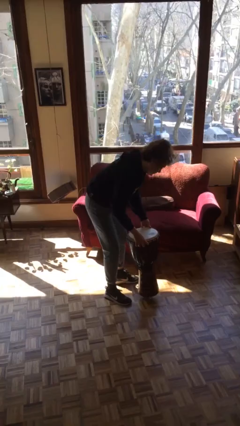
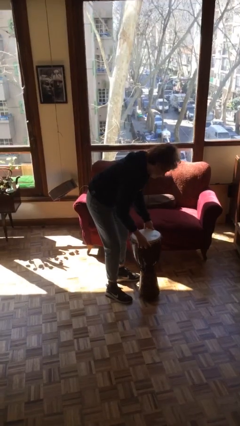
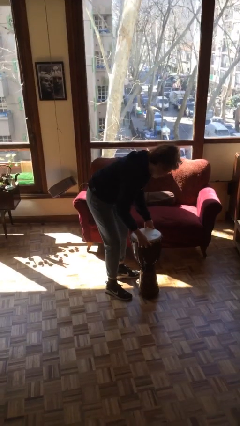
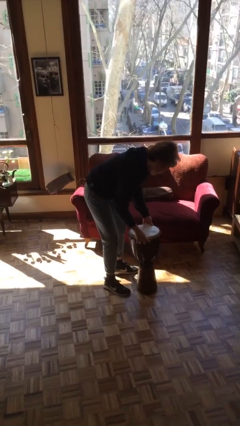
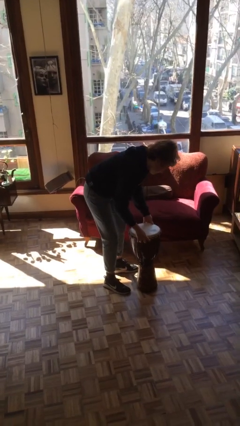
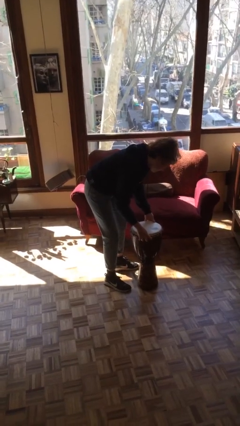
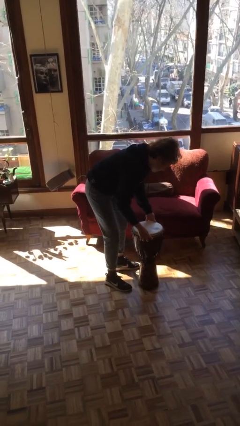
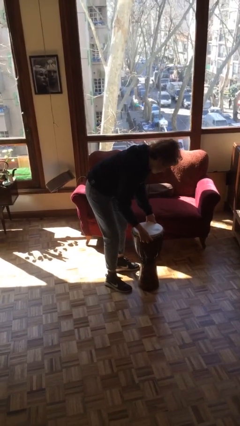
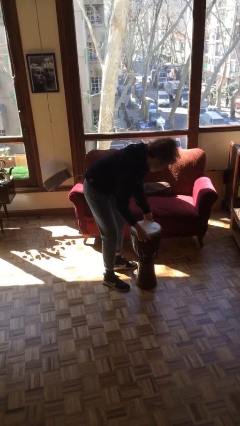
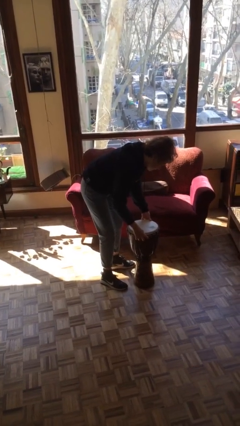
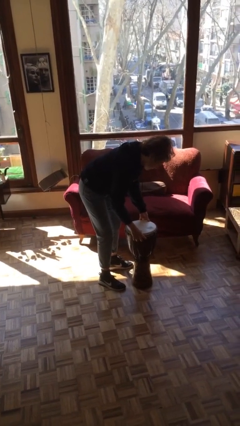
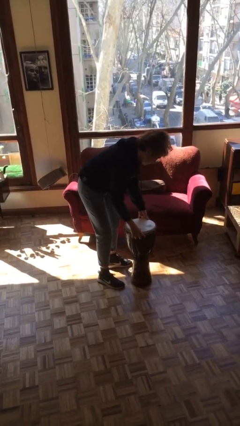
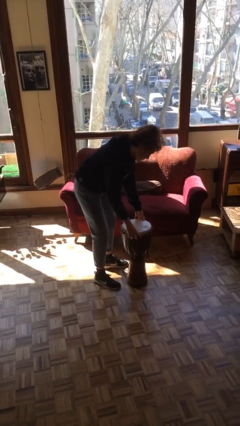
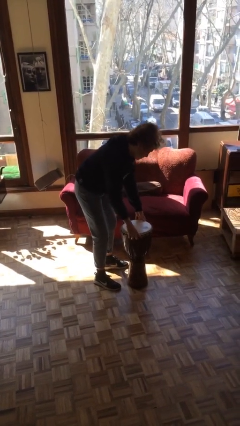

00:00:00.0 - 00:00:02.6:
person puts down object on floor

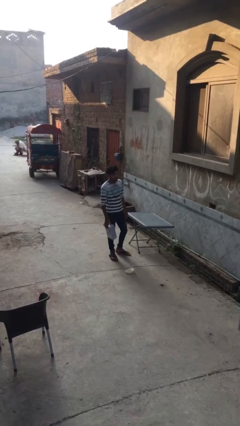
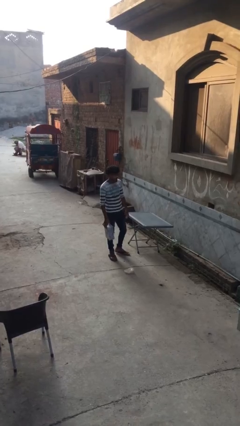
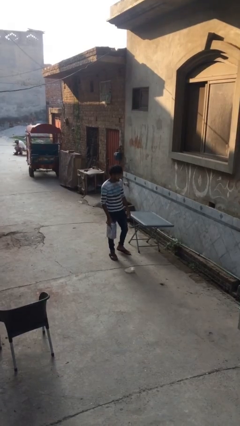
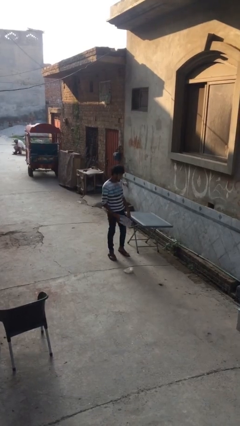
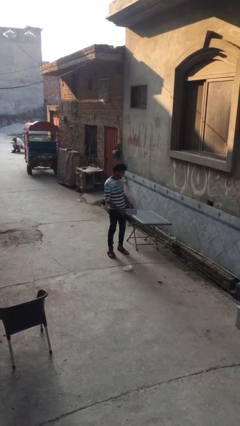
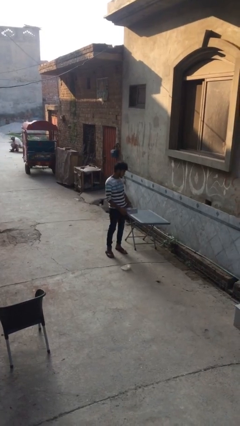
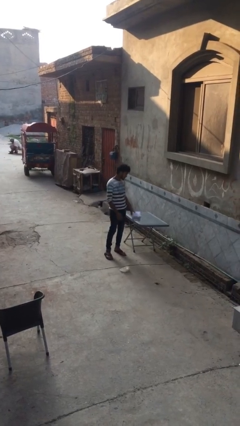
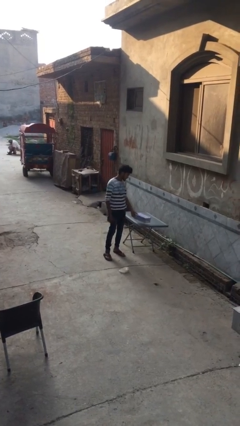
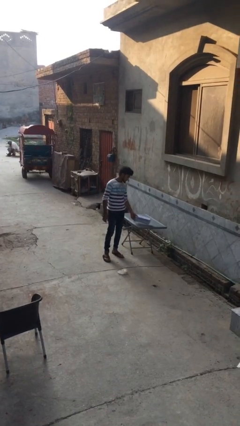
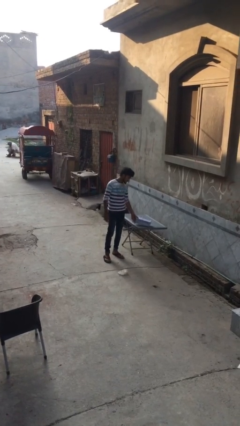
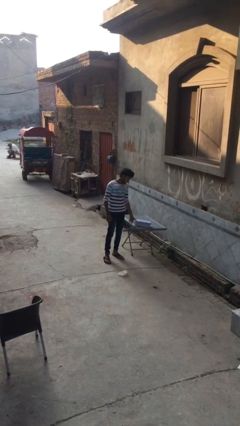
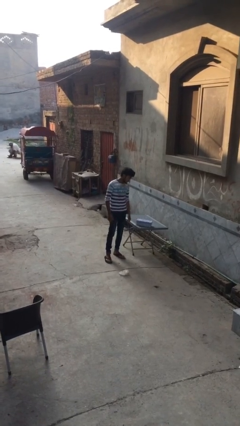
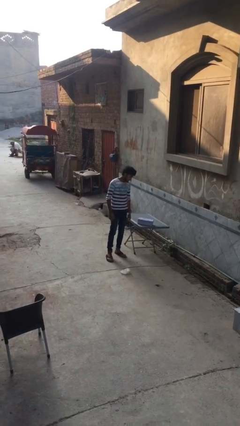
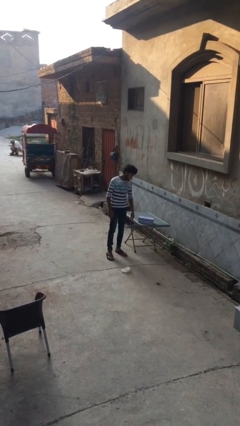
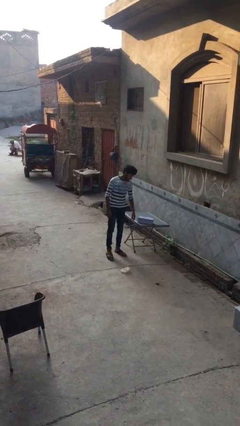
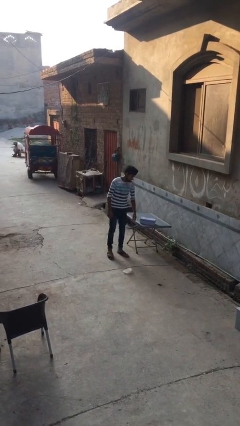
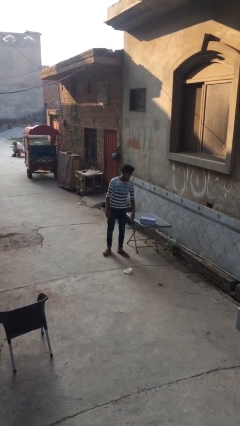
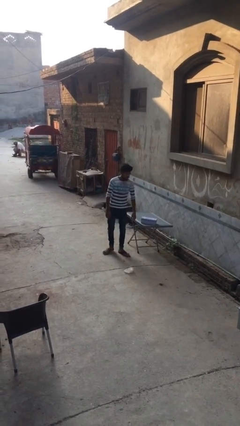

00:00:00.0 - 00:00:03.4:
person puts down object on table

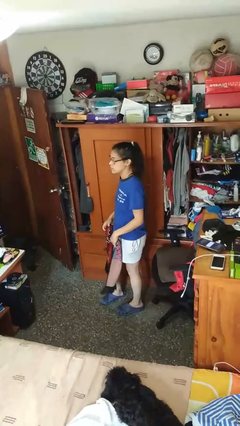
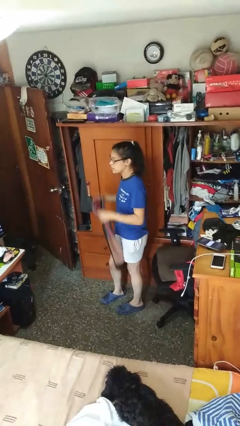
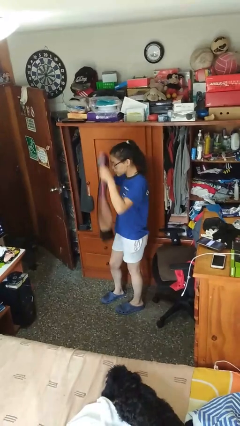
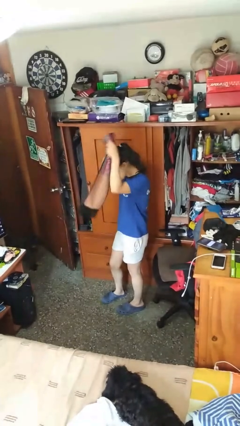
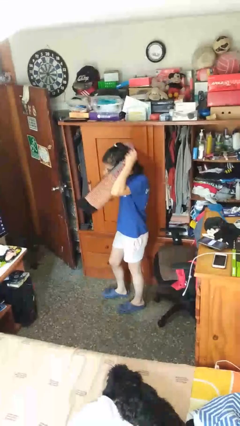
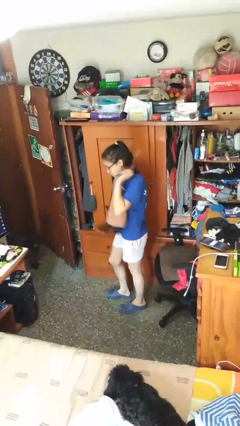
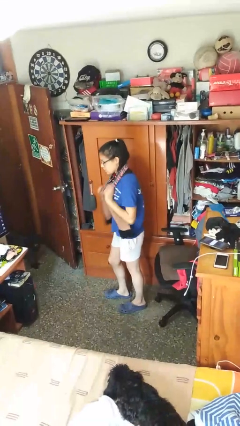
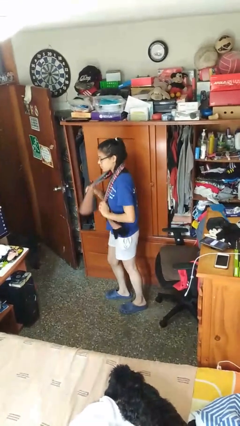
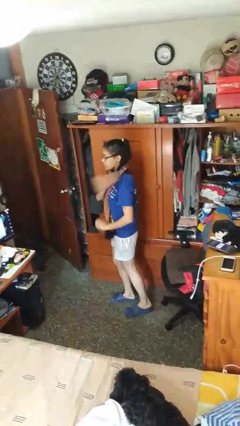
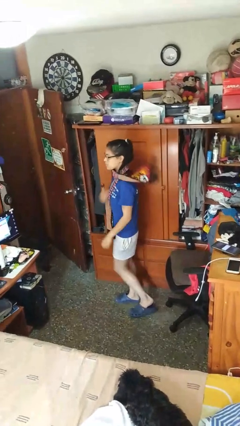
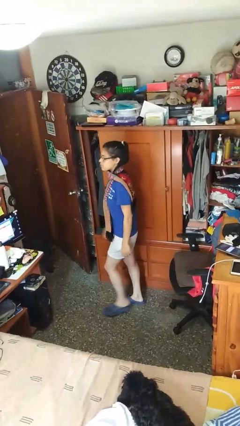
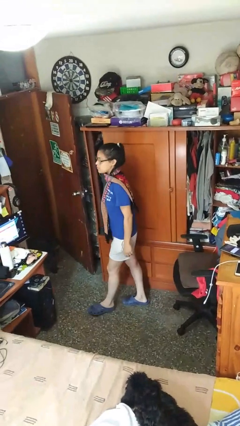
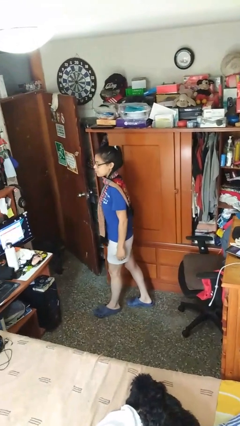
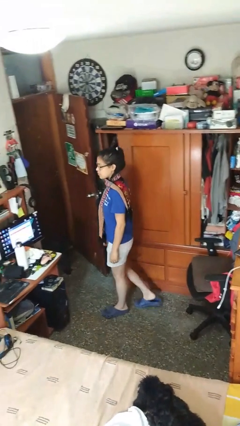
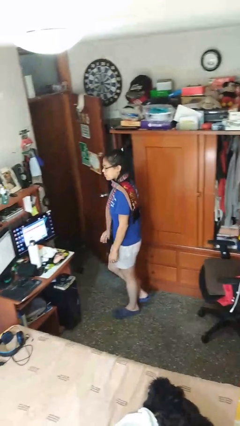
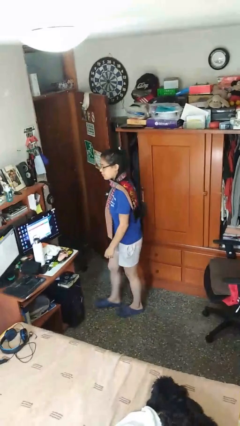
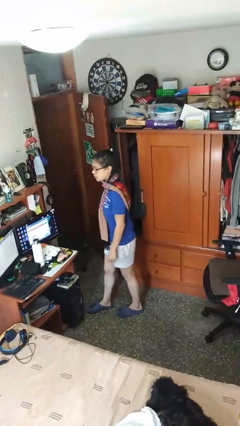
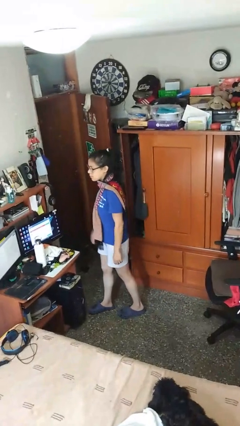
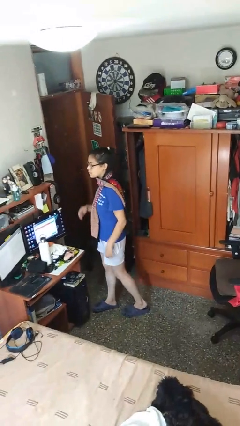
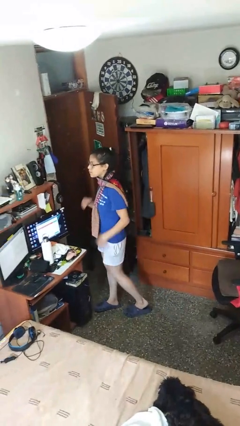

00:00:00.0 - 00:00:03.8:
person puts on scarf

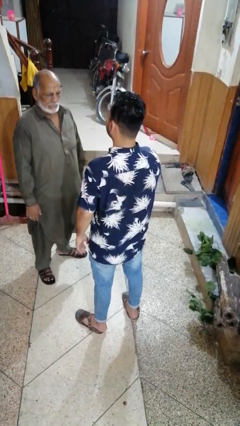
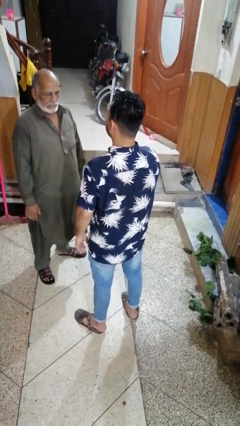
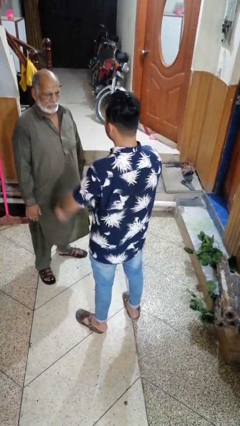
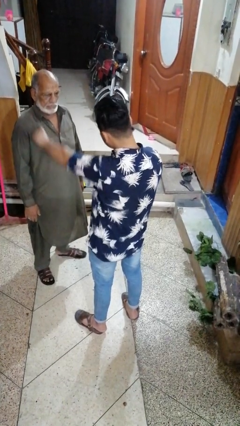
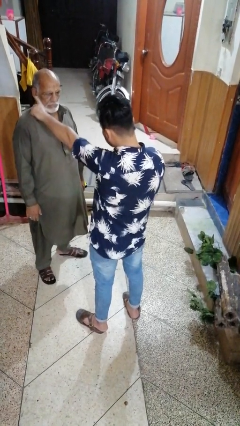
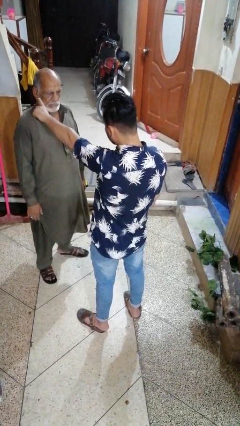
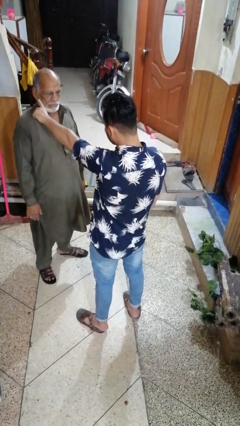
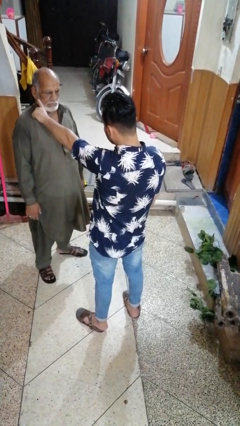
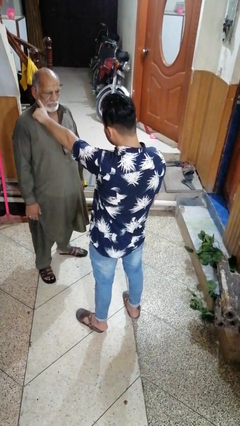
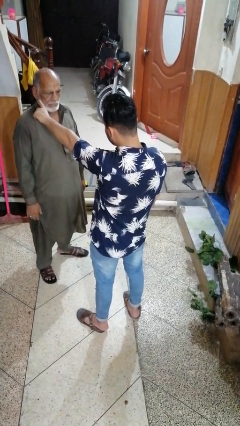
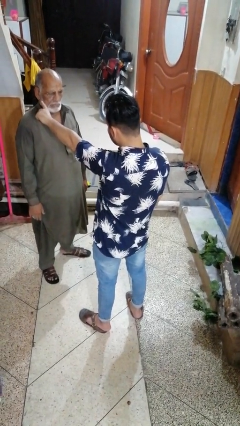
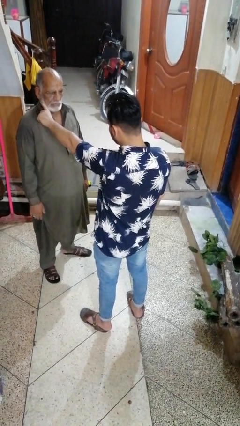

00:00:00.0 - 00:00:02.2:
person shoves person

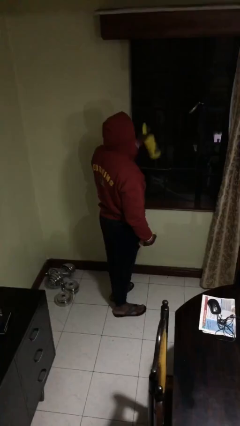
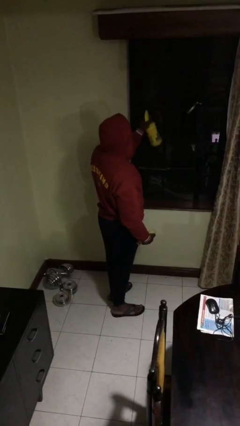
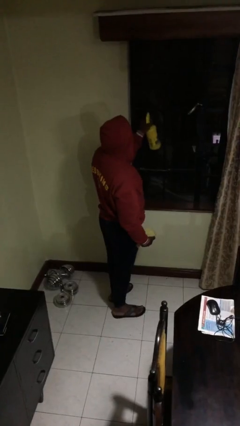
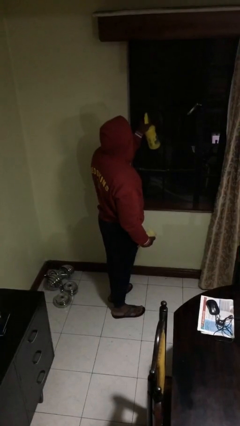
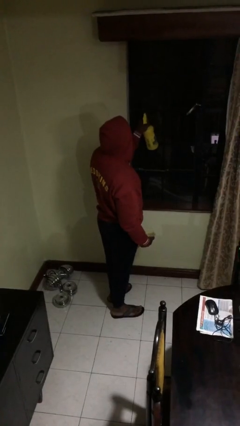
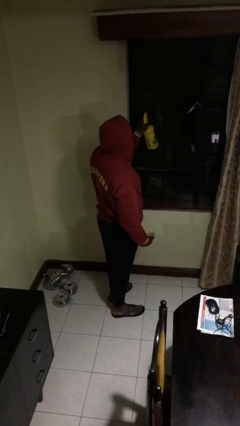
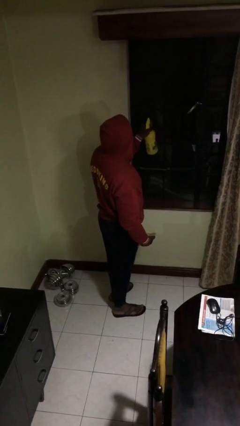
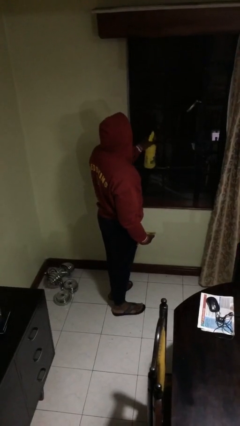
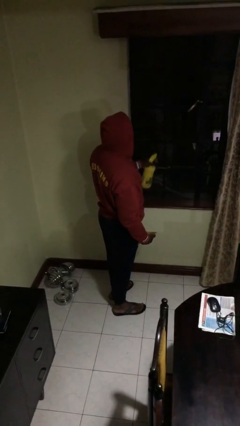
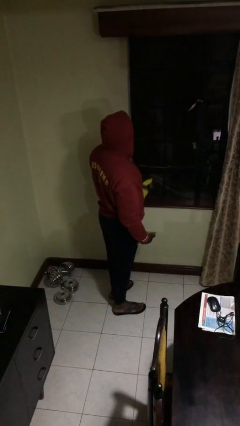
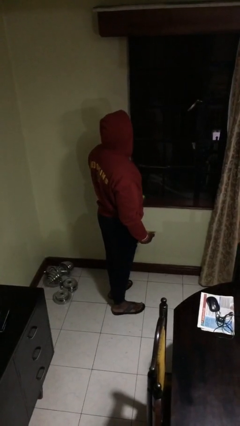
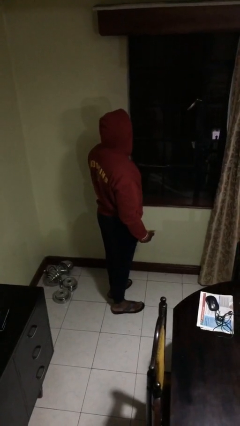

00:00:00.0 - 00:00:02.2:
person sprays from bottle

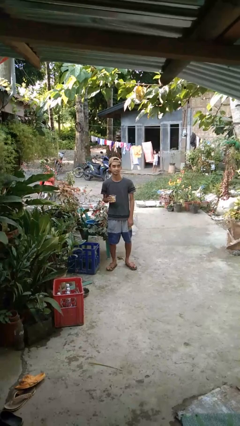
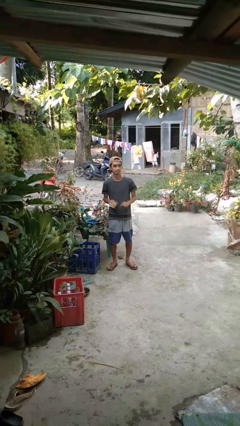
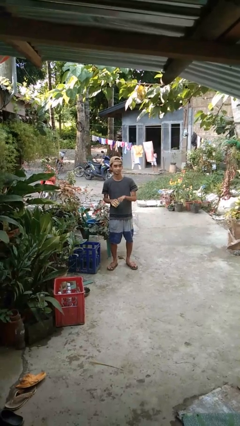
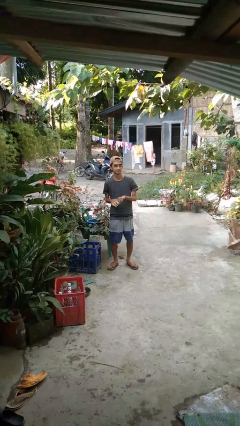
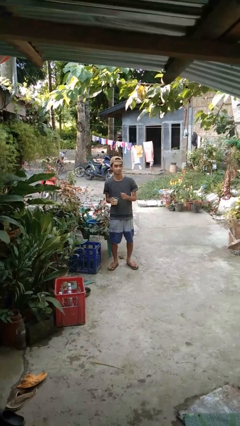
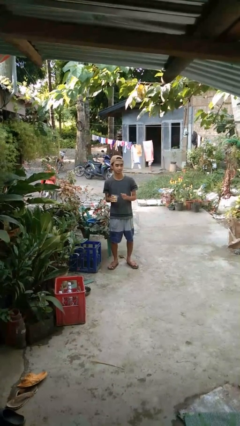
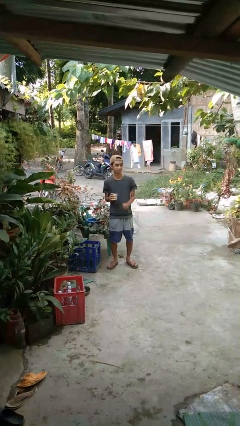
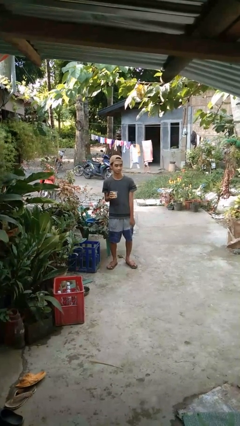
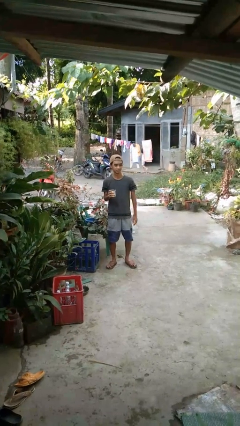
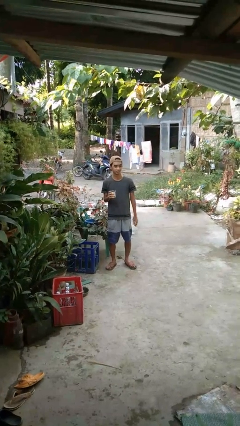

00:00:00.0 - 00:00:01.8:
person opens beverage can

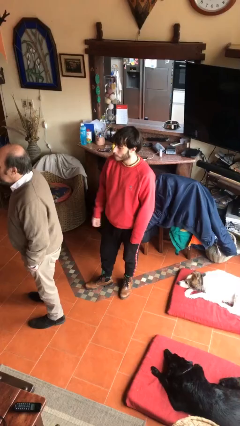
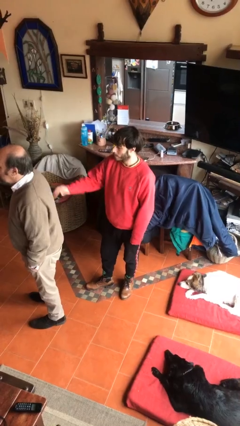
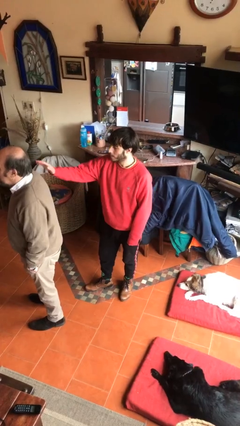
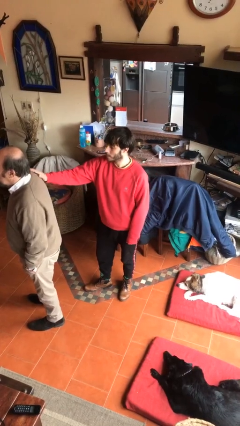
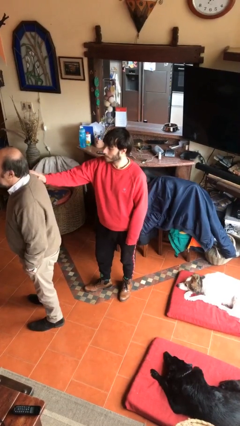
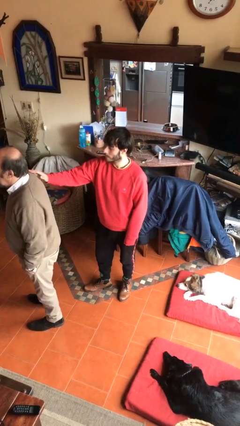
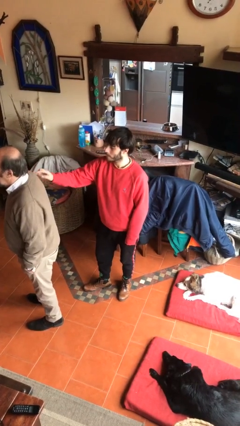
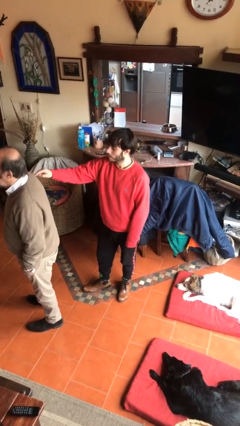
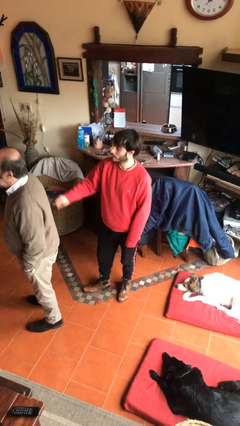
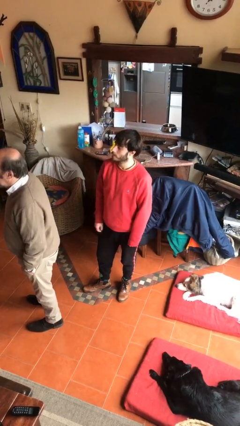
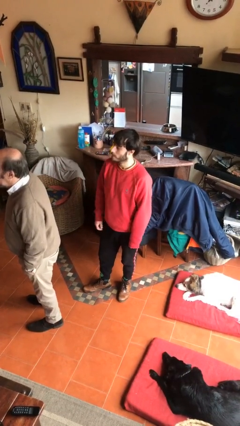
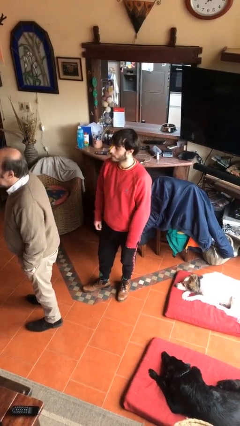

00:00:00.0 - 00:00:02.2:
person touches back of person
